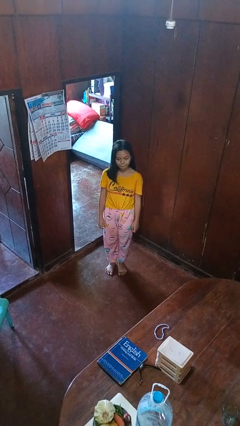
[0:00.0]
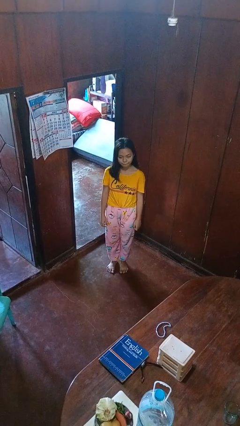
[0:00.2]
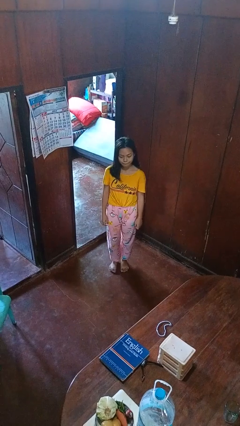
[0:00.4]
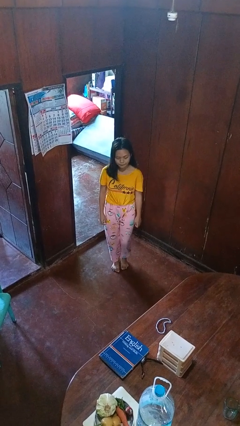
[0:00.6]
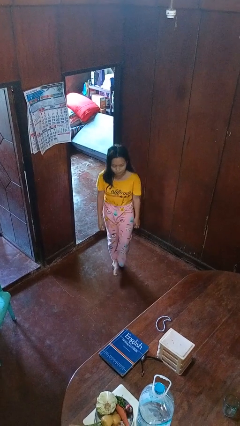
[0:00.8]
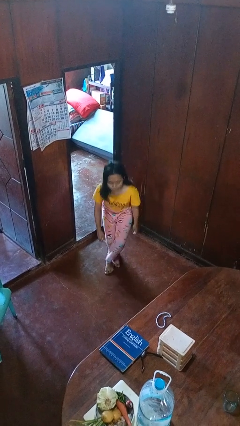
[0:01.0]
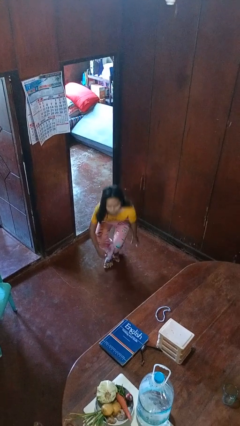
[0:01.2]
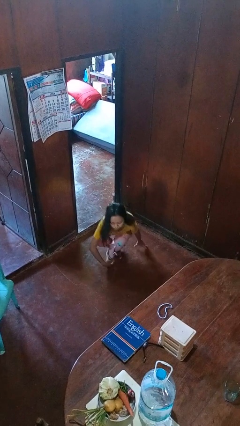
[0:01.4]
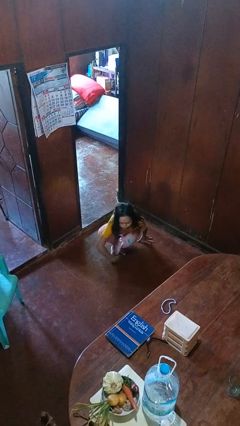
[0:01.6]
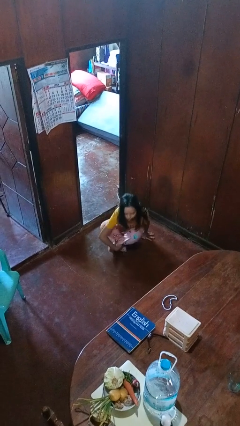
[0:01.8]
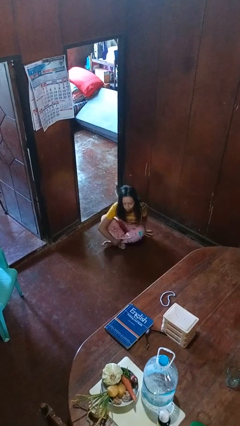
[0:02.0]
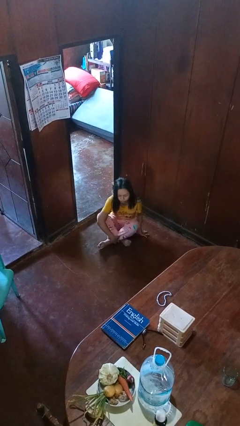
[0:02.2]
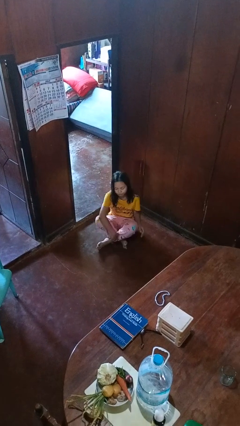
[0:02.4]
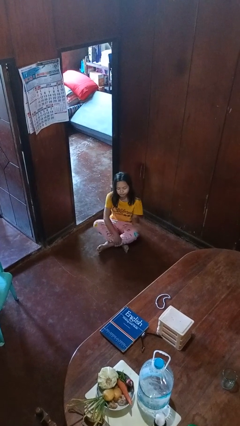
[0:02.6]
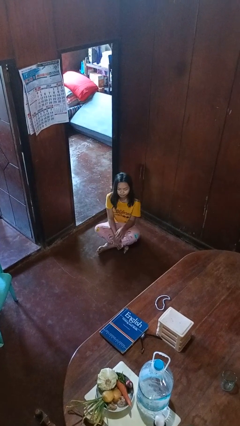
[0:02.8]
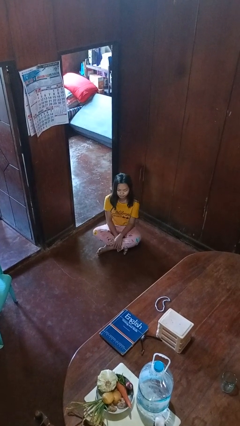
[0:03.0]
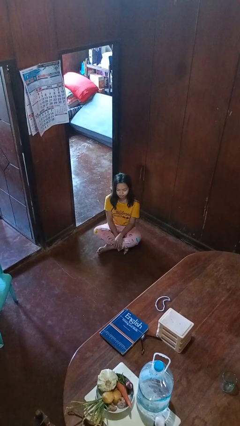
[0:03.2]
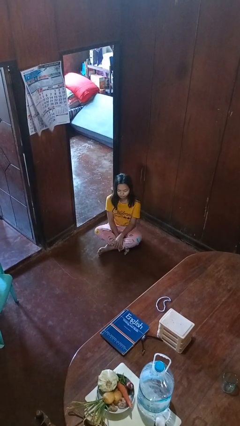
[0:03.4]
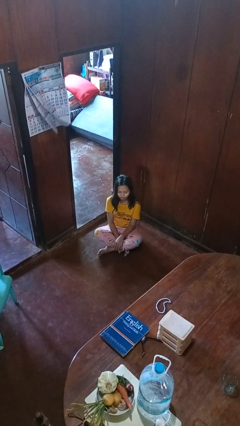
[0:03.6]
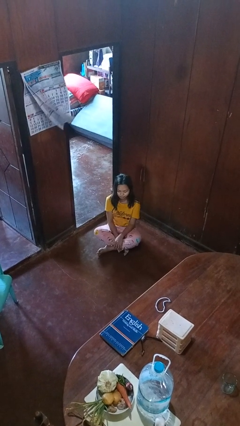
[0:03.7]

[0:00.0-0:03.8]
person sits crisscross

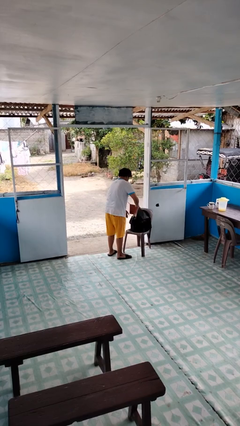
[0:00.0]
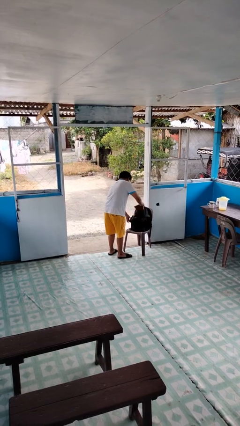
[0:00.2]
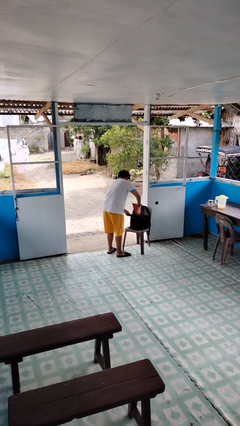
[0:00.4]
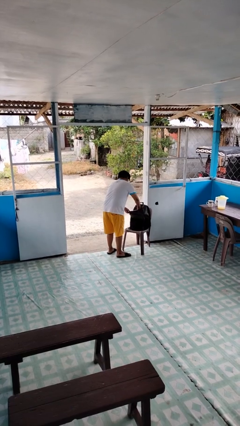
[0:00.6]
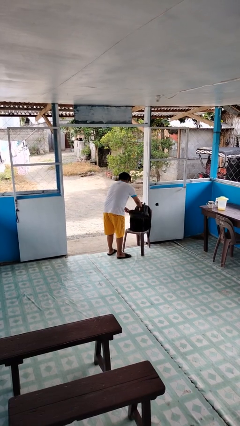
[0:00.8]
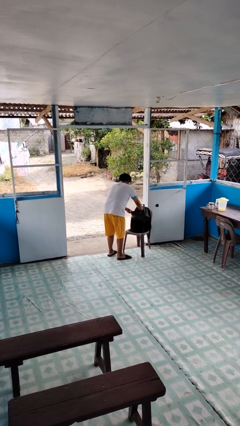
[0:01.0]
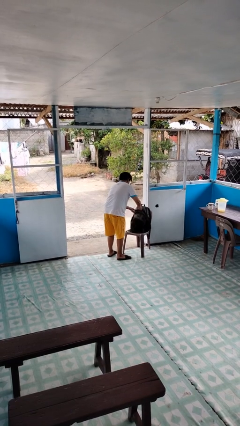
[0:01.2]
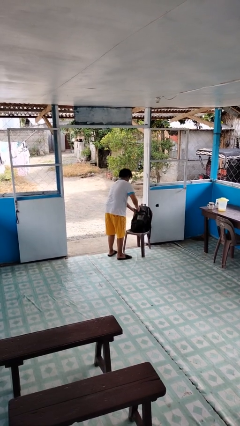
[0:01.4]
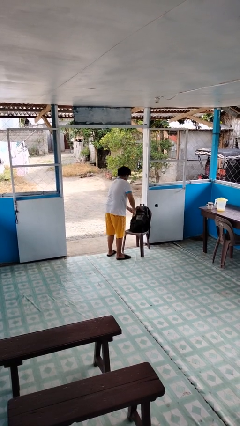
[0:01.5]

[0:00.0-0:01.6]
person puts object into backpack

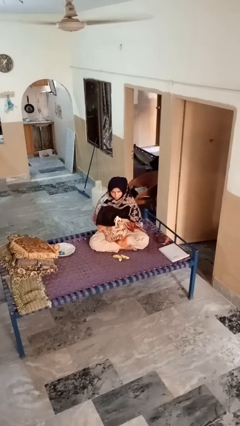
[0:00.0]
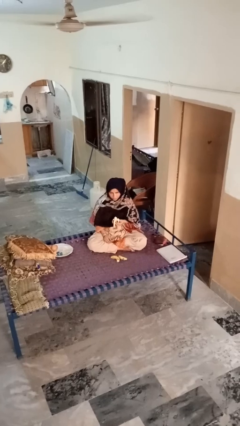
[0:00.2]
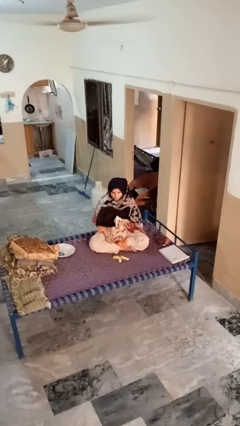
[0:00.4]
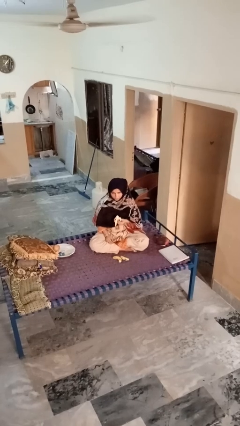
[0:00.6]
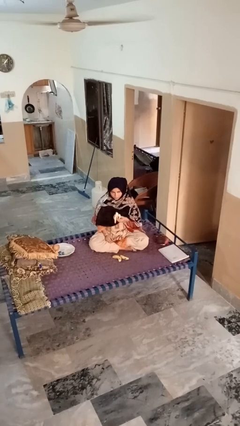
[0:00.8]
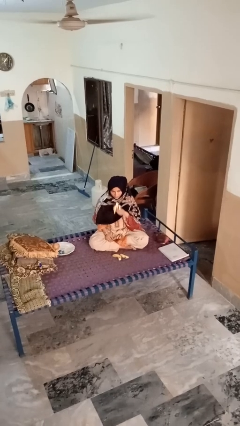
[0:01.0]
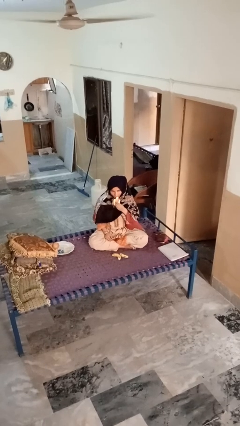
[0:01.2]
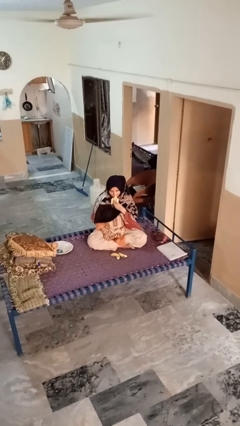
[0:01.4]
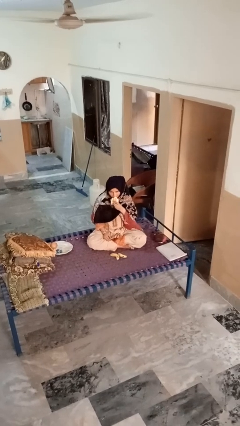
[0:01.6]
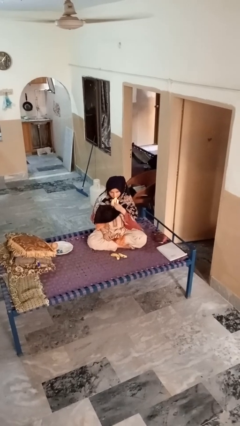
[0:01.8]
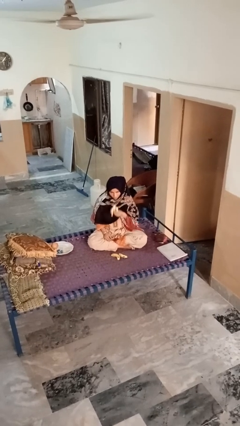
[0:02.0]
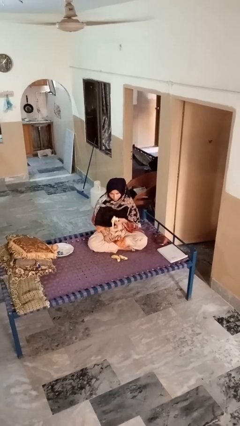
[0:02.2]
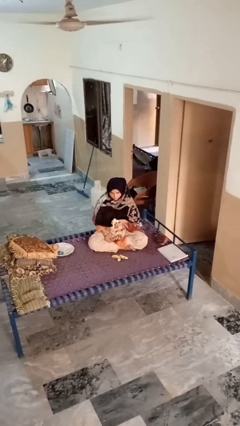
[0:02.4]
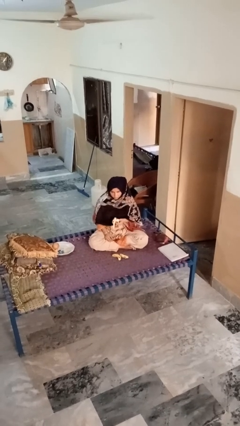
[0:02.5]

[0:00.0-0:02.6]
person eats banana

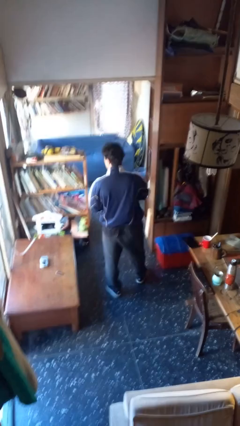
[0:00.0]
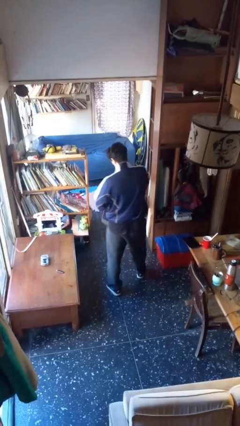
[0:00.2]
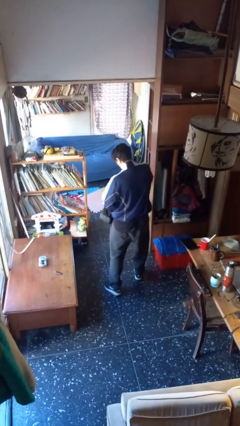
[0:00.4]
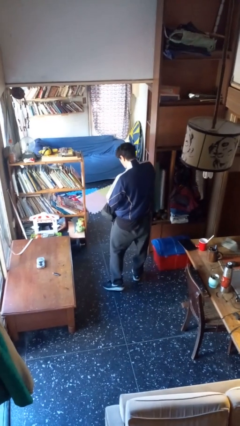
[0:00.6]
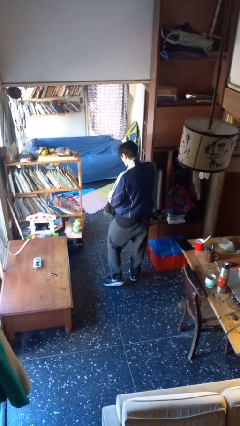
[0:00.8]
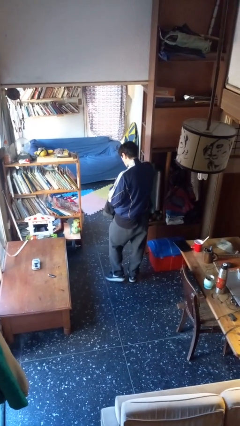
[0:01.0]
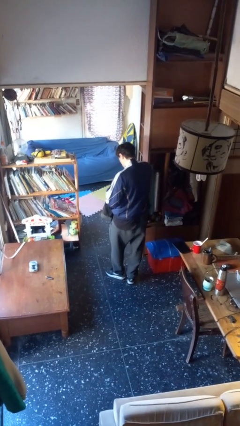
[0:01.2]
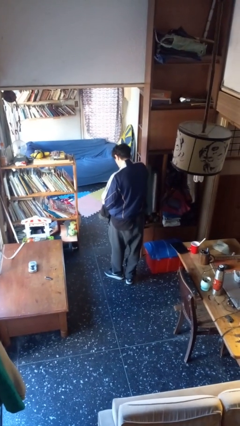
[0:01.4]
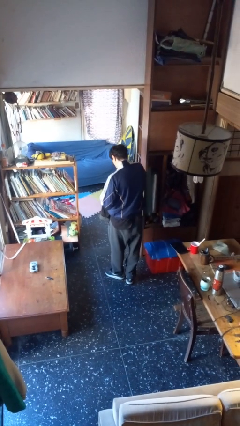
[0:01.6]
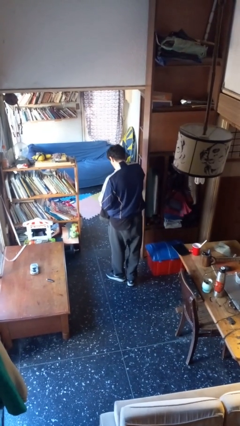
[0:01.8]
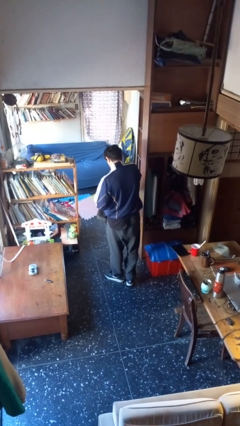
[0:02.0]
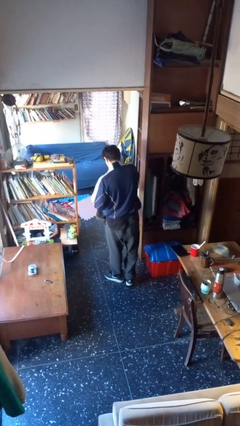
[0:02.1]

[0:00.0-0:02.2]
person searches in backpack

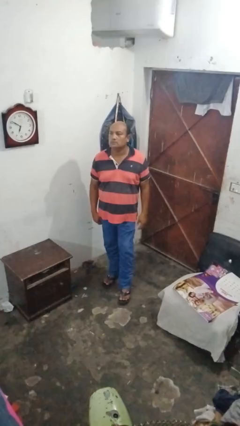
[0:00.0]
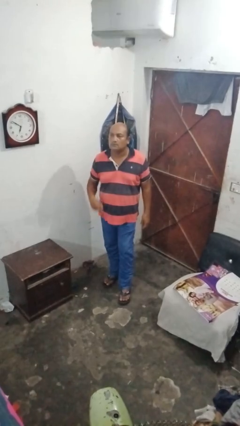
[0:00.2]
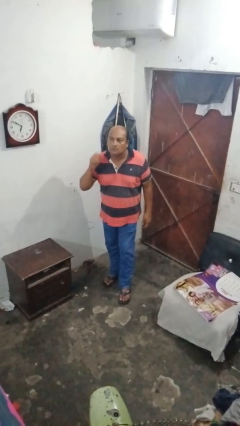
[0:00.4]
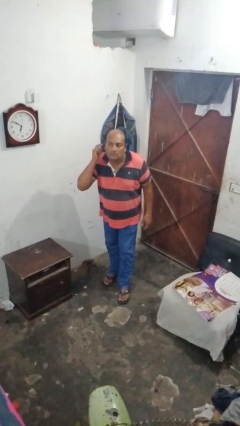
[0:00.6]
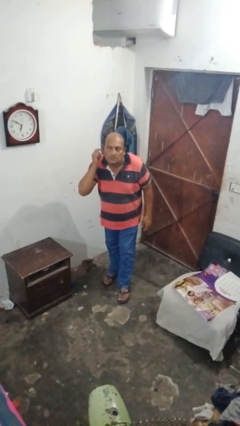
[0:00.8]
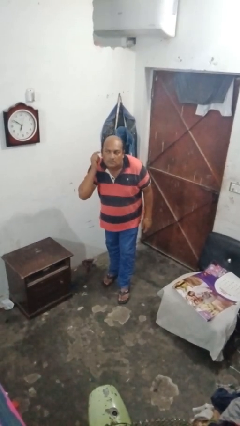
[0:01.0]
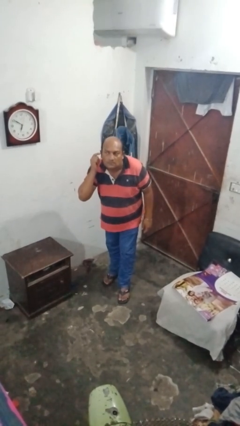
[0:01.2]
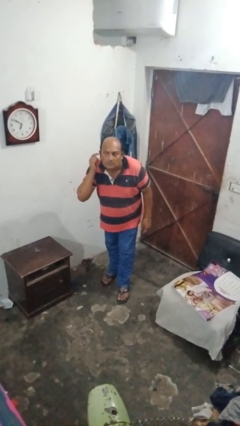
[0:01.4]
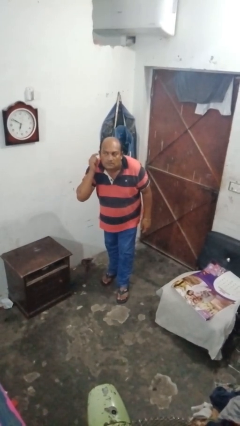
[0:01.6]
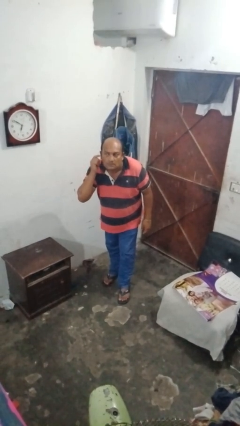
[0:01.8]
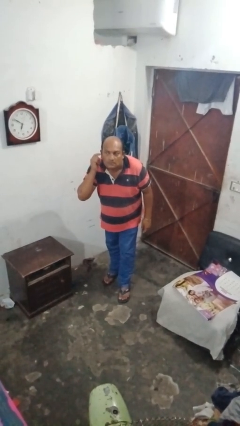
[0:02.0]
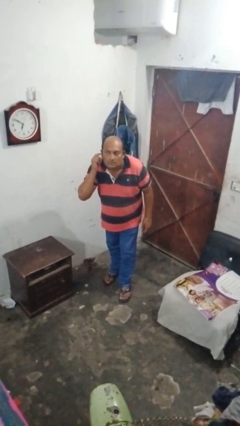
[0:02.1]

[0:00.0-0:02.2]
person gestures be quiet

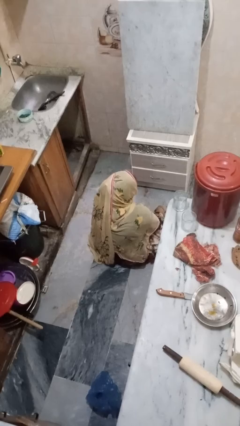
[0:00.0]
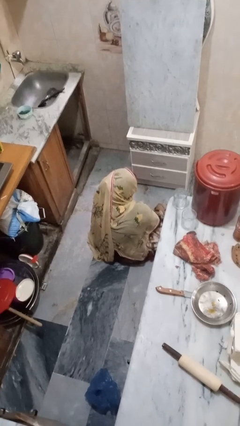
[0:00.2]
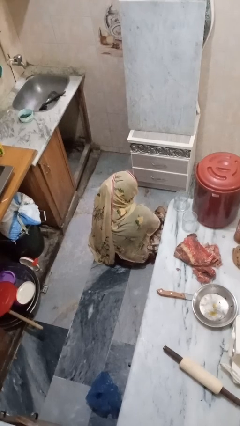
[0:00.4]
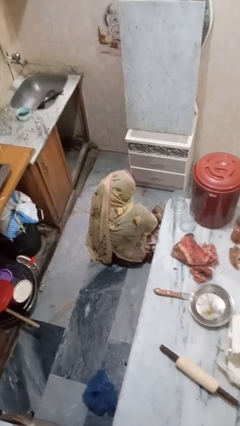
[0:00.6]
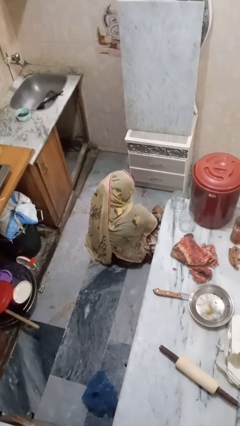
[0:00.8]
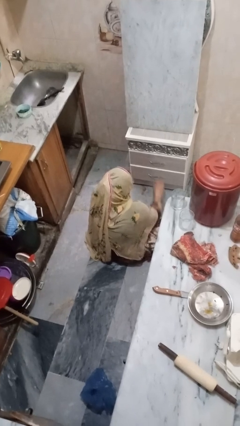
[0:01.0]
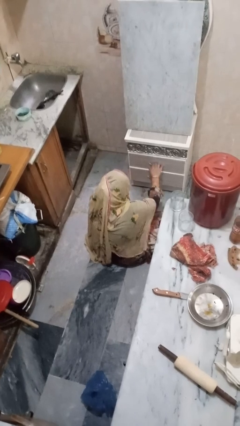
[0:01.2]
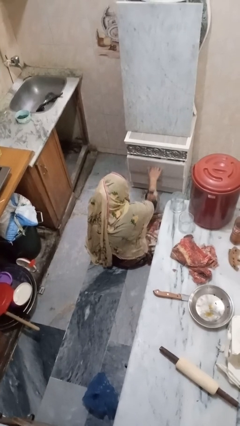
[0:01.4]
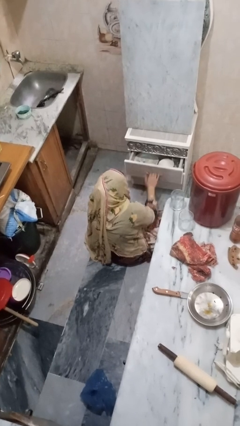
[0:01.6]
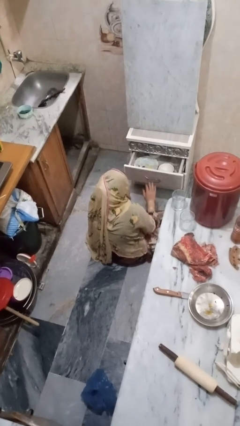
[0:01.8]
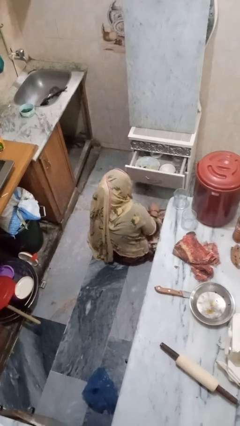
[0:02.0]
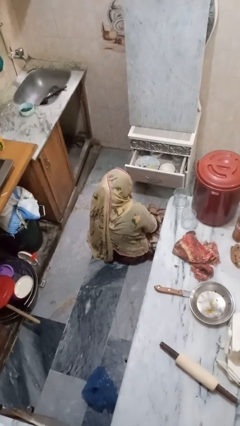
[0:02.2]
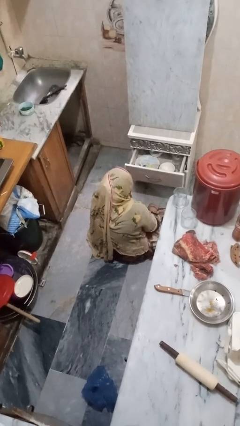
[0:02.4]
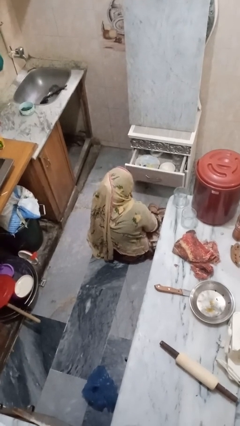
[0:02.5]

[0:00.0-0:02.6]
person opens kitchen drawer

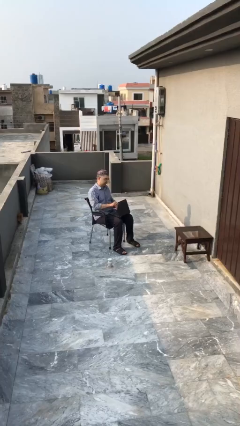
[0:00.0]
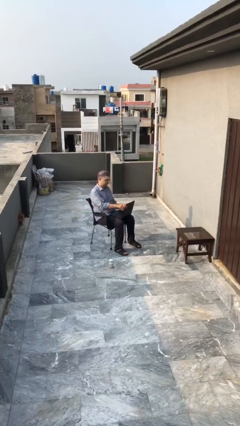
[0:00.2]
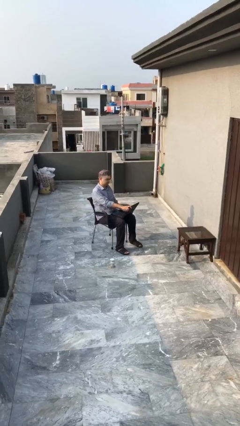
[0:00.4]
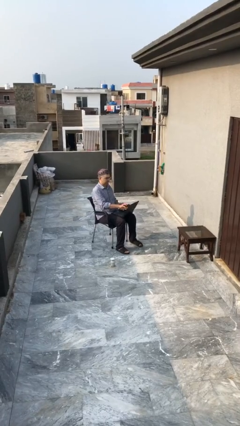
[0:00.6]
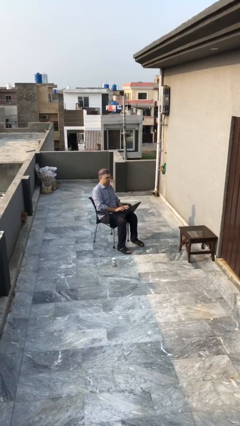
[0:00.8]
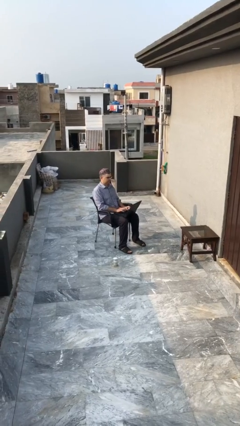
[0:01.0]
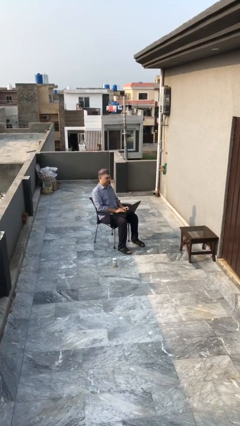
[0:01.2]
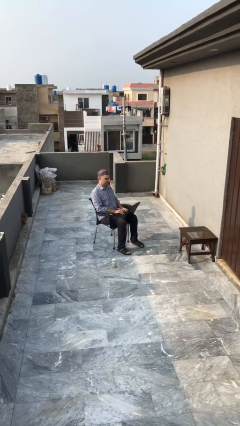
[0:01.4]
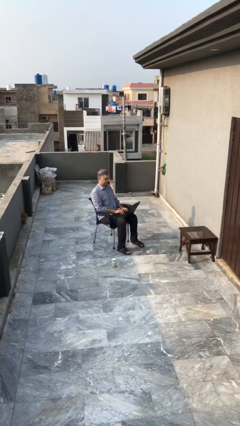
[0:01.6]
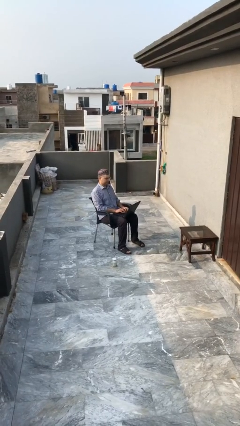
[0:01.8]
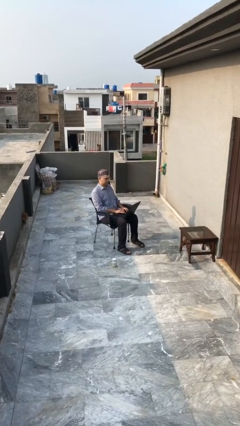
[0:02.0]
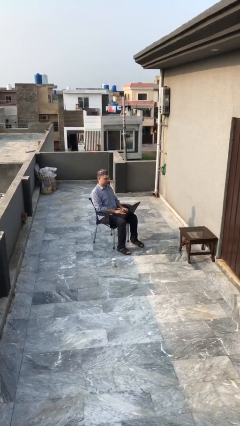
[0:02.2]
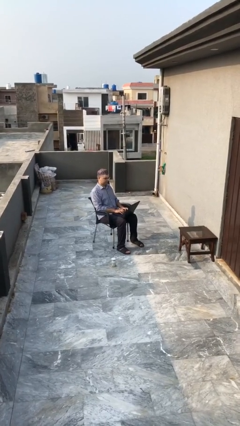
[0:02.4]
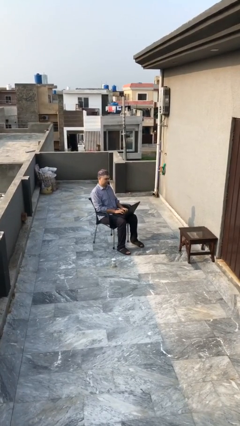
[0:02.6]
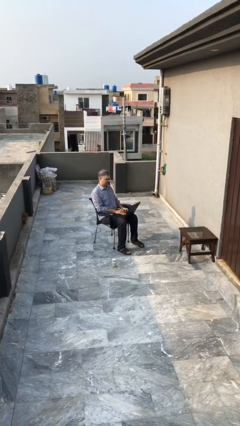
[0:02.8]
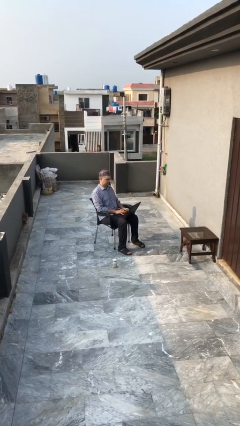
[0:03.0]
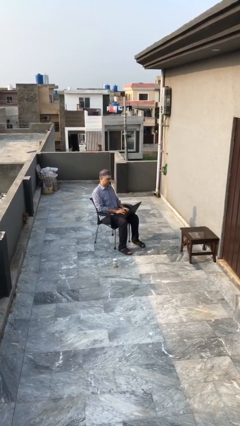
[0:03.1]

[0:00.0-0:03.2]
person interacts with laptop
